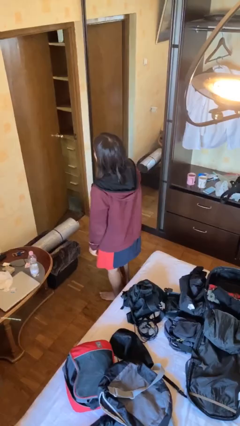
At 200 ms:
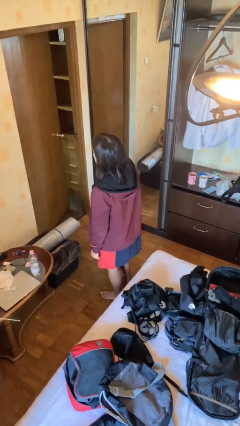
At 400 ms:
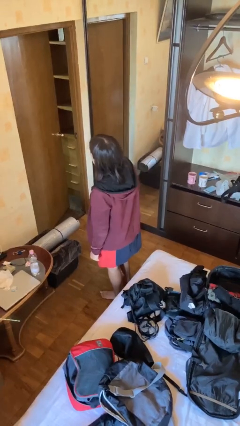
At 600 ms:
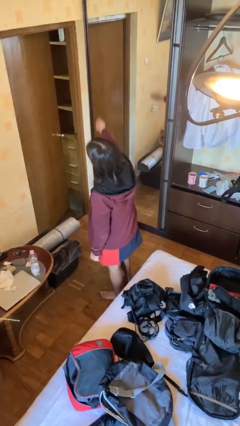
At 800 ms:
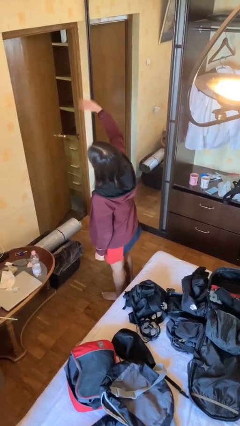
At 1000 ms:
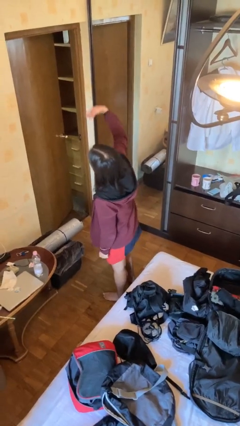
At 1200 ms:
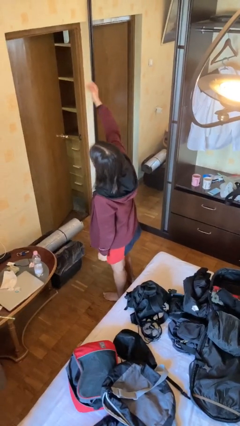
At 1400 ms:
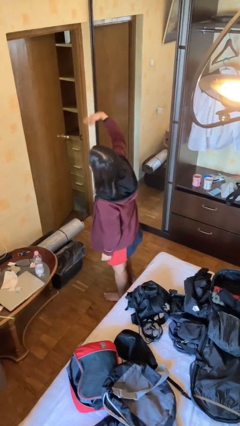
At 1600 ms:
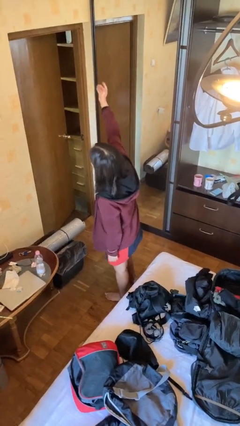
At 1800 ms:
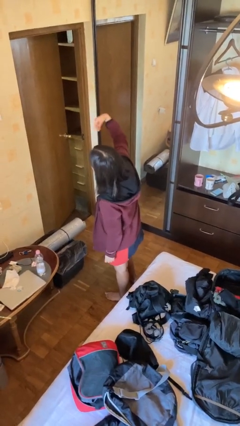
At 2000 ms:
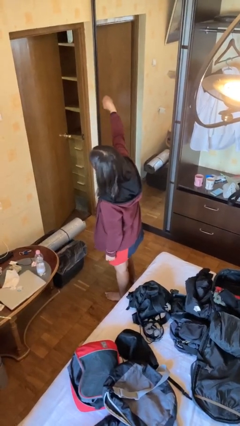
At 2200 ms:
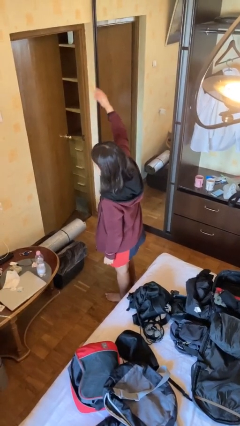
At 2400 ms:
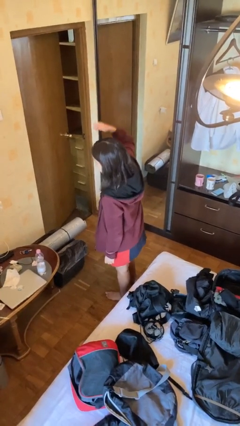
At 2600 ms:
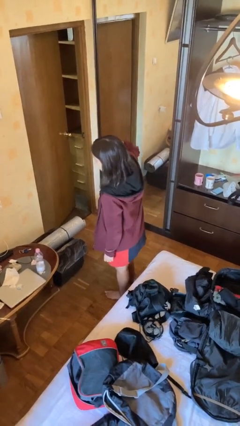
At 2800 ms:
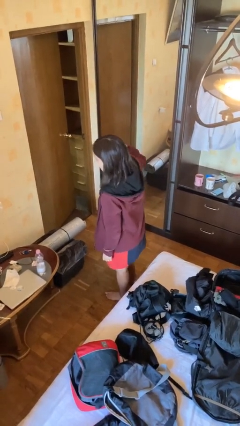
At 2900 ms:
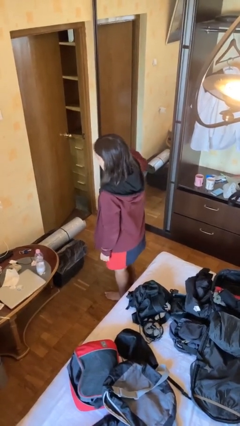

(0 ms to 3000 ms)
person gestures come here

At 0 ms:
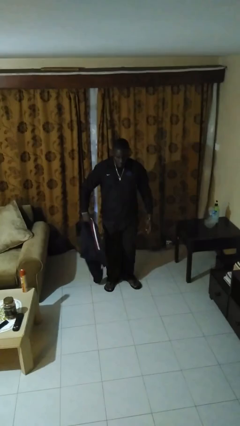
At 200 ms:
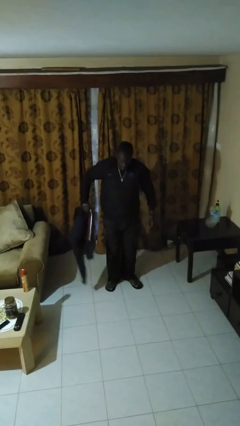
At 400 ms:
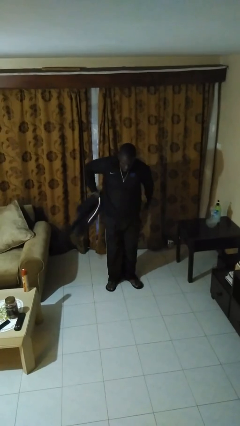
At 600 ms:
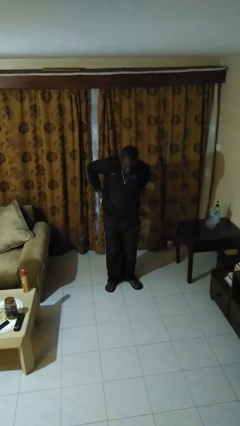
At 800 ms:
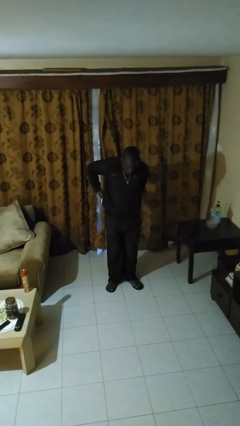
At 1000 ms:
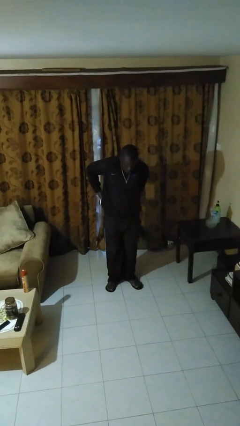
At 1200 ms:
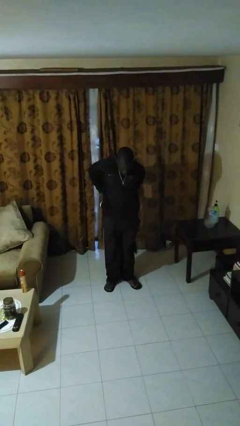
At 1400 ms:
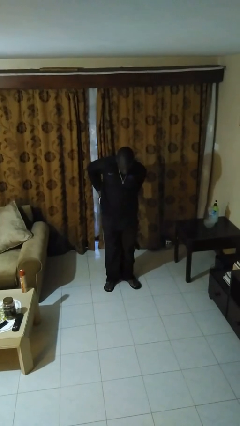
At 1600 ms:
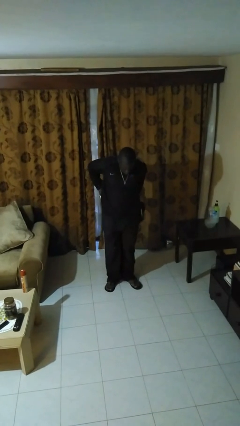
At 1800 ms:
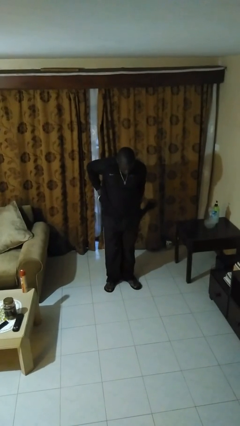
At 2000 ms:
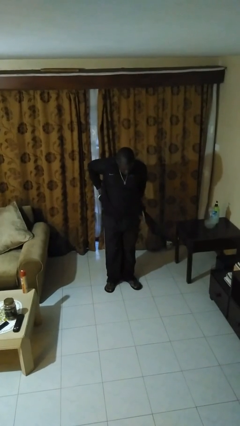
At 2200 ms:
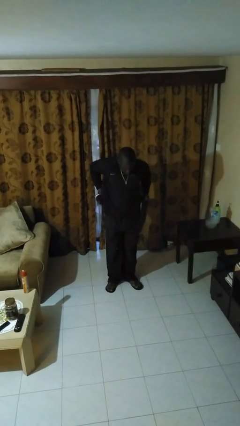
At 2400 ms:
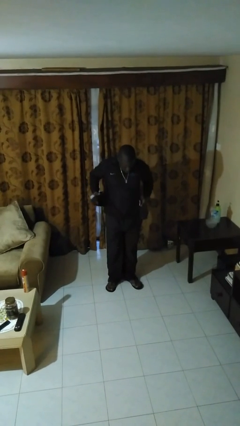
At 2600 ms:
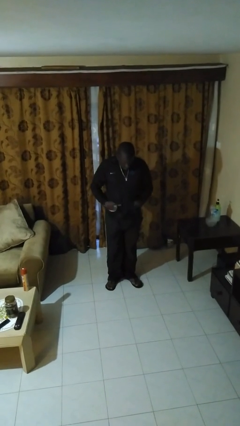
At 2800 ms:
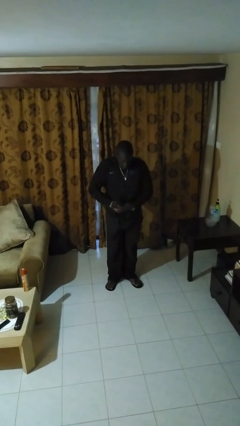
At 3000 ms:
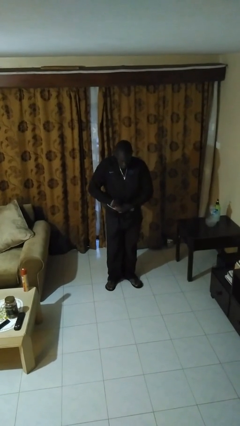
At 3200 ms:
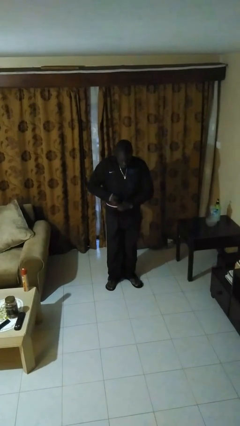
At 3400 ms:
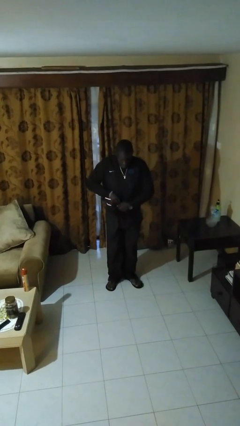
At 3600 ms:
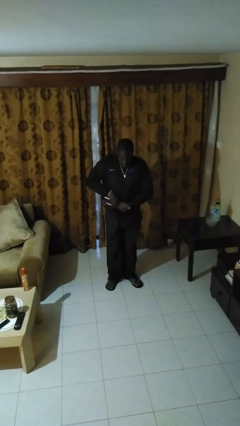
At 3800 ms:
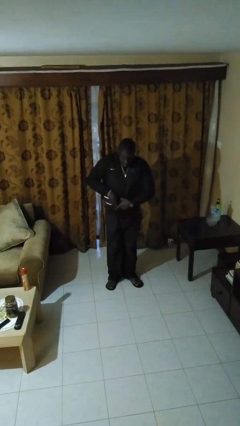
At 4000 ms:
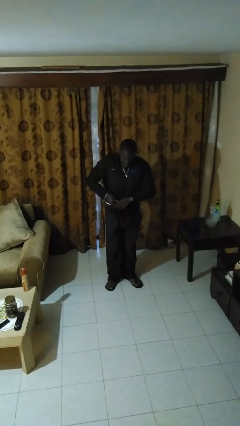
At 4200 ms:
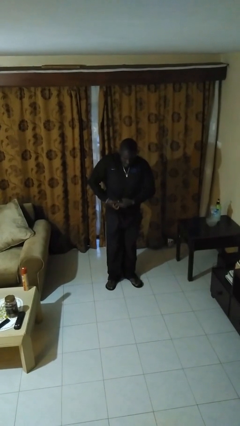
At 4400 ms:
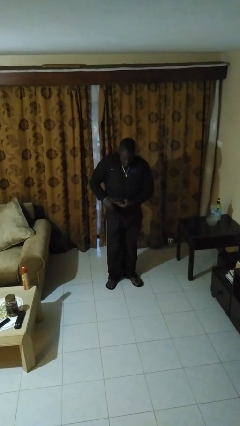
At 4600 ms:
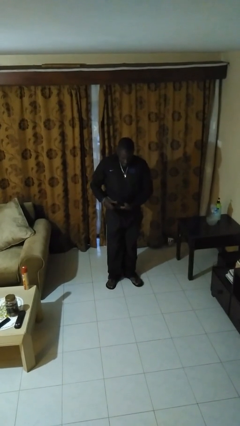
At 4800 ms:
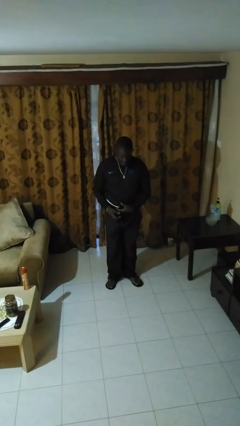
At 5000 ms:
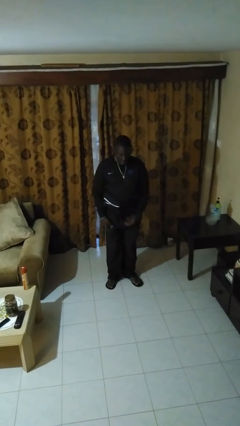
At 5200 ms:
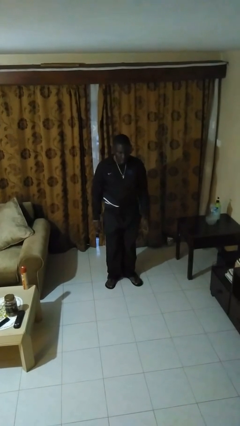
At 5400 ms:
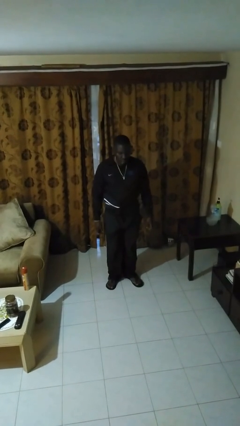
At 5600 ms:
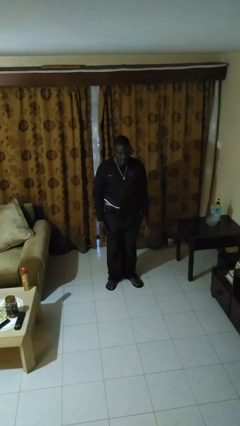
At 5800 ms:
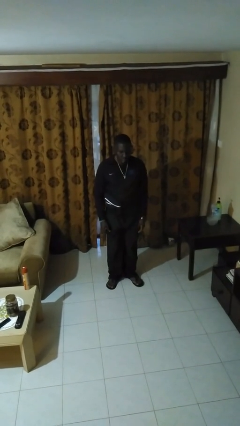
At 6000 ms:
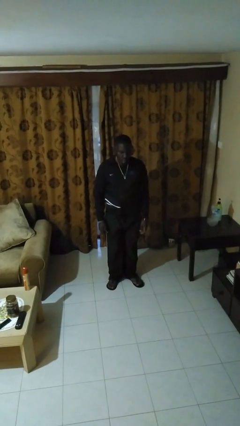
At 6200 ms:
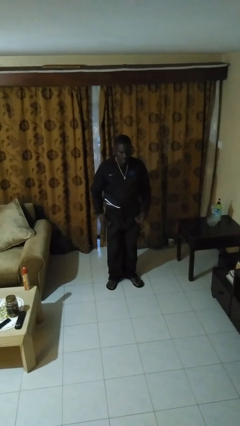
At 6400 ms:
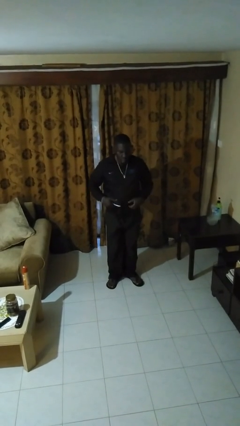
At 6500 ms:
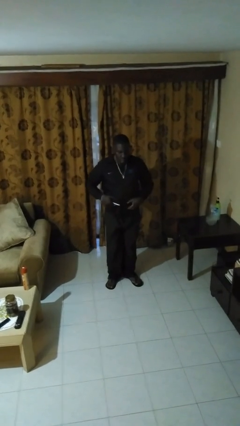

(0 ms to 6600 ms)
person ties jacket around waist

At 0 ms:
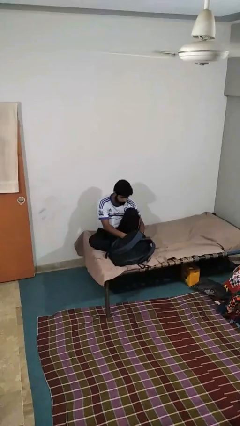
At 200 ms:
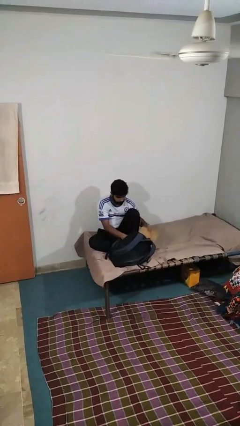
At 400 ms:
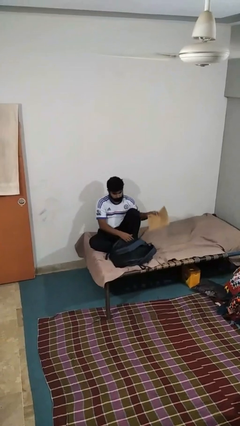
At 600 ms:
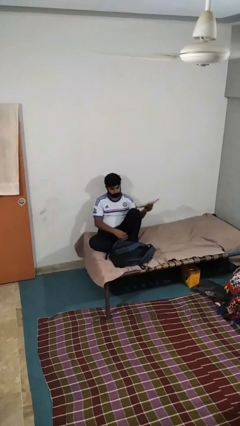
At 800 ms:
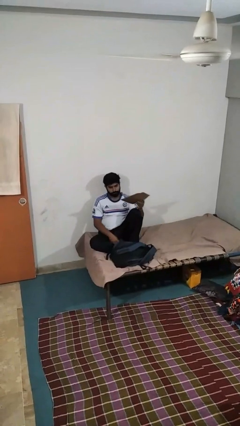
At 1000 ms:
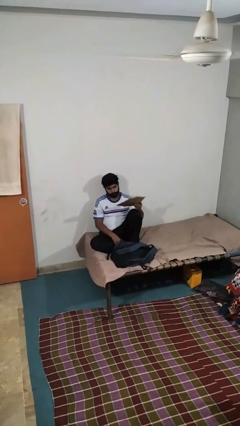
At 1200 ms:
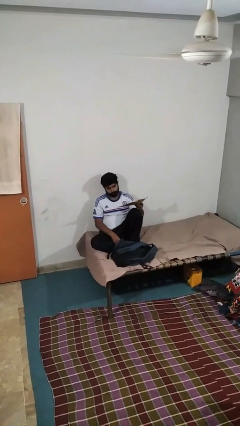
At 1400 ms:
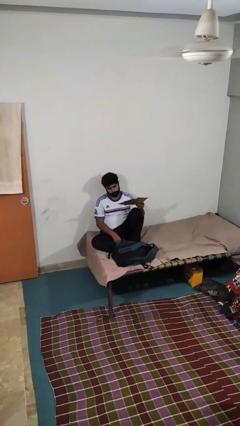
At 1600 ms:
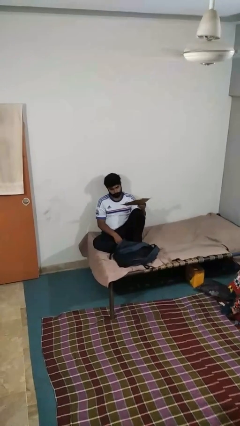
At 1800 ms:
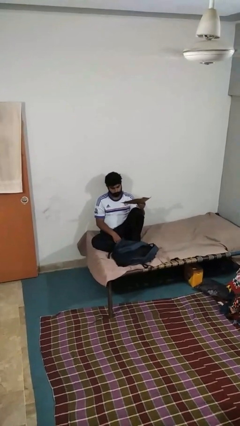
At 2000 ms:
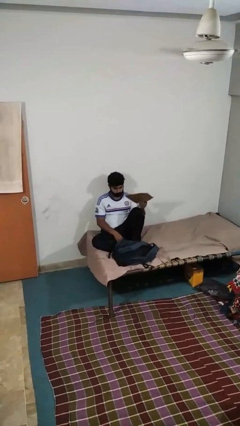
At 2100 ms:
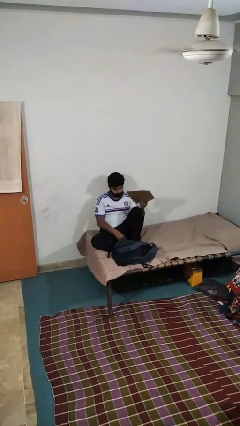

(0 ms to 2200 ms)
person takes object from backpack

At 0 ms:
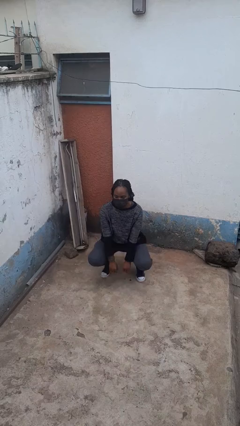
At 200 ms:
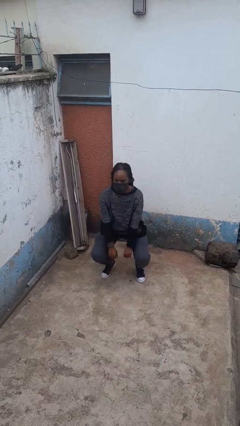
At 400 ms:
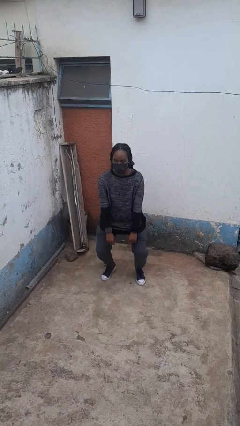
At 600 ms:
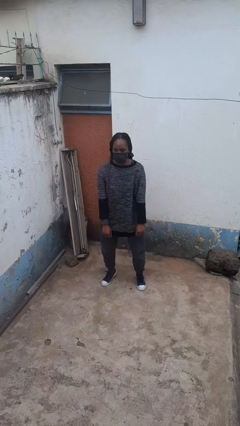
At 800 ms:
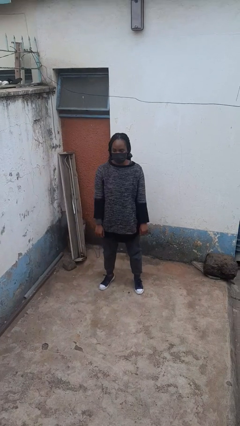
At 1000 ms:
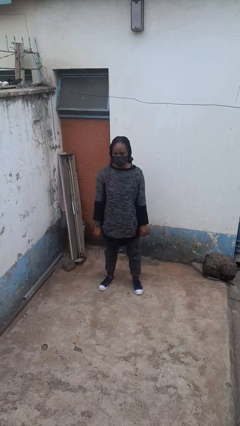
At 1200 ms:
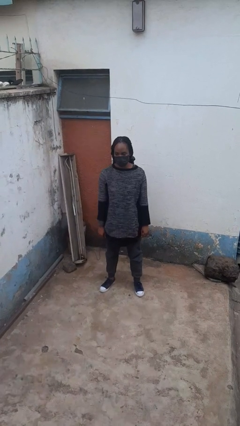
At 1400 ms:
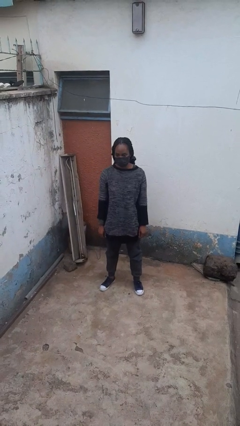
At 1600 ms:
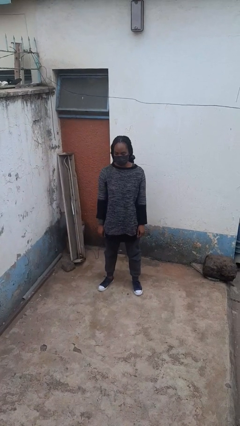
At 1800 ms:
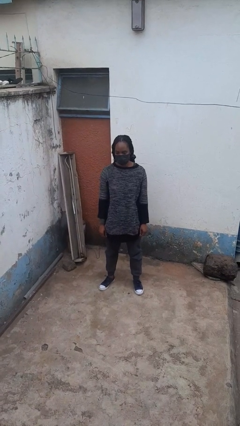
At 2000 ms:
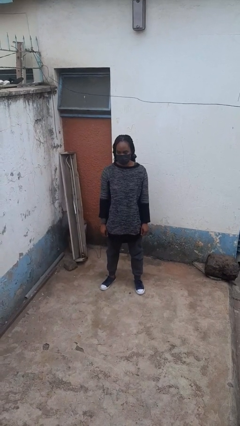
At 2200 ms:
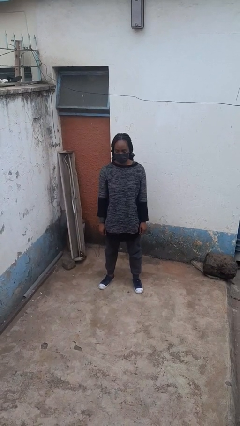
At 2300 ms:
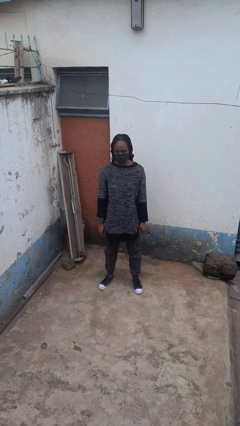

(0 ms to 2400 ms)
person stands up

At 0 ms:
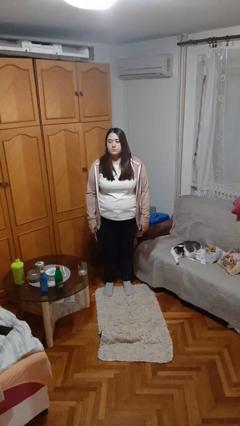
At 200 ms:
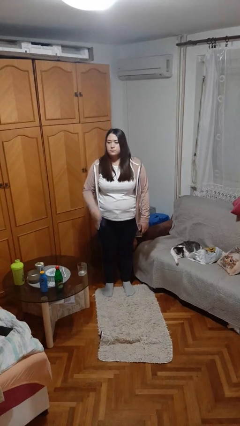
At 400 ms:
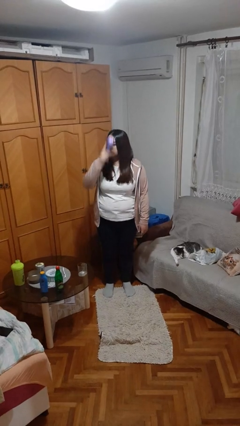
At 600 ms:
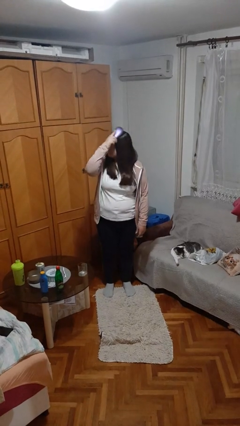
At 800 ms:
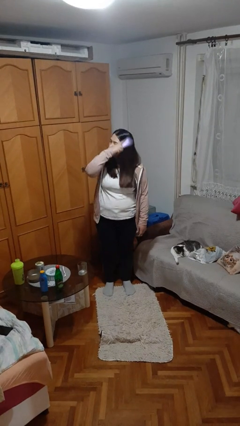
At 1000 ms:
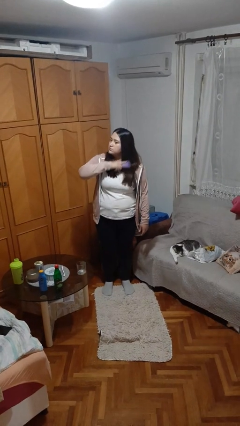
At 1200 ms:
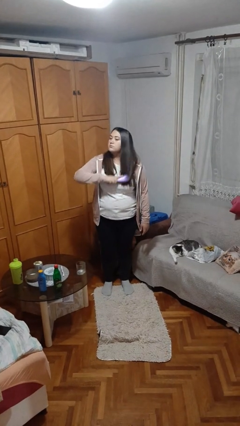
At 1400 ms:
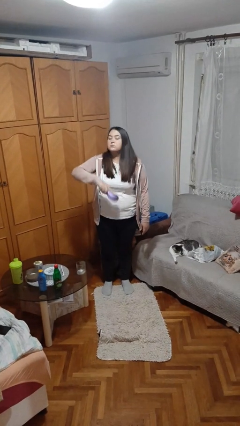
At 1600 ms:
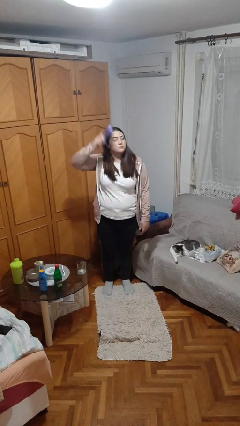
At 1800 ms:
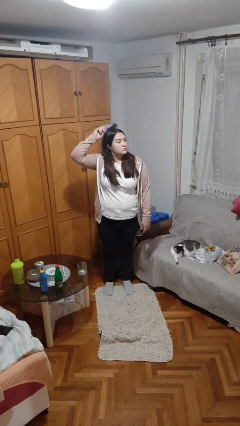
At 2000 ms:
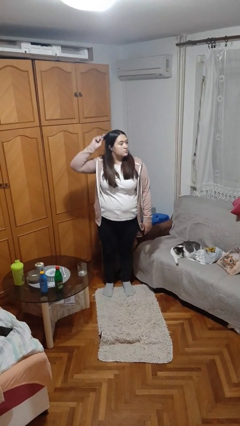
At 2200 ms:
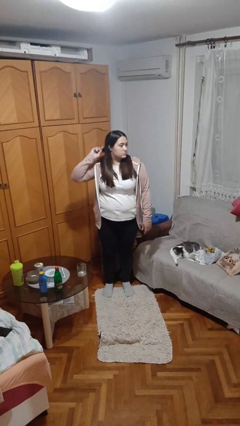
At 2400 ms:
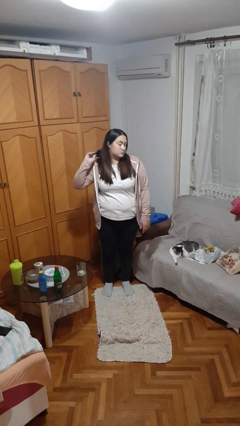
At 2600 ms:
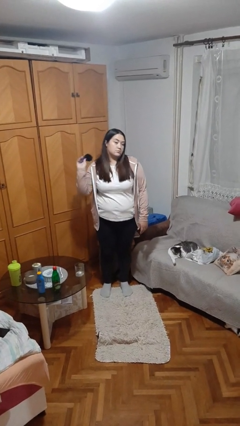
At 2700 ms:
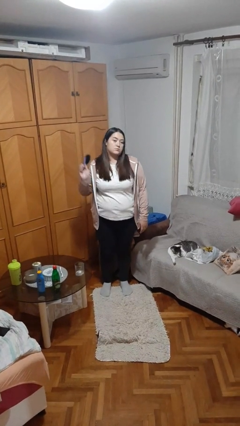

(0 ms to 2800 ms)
person brushes hair
